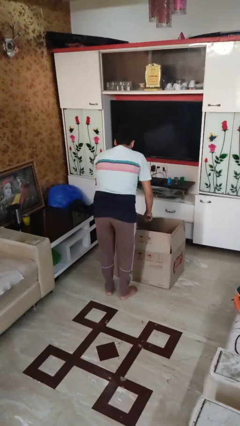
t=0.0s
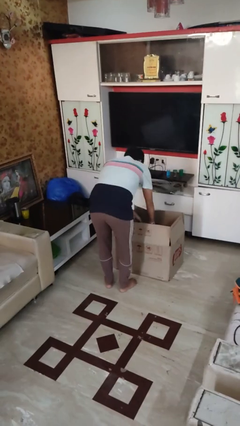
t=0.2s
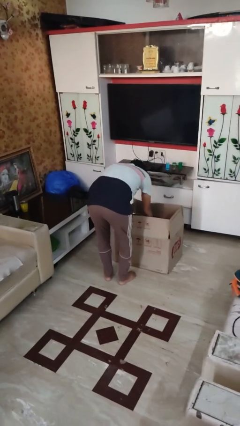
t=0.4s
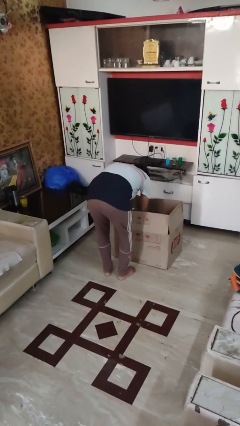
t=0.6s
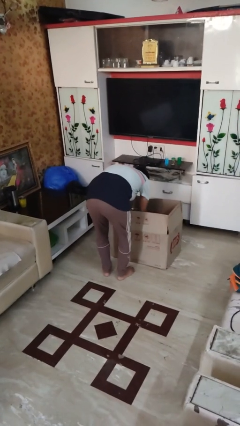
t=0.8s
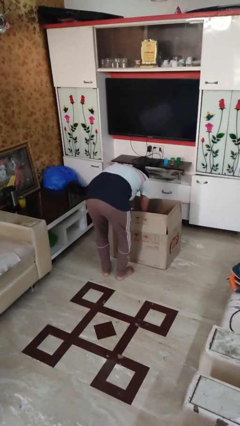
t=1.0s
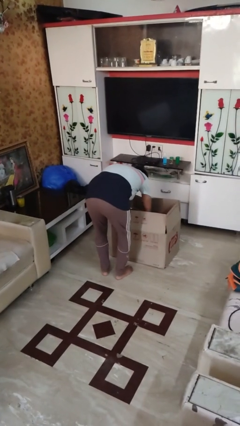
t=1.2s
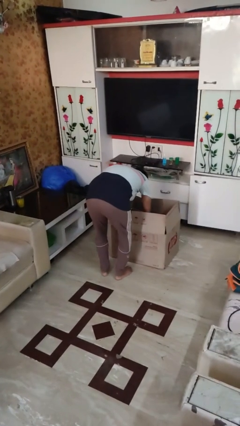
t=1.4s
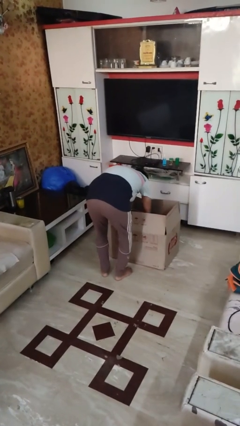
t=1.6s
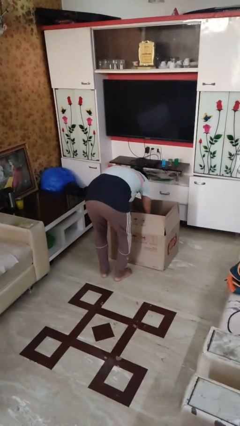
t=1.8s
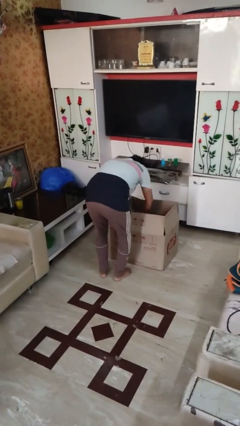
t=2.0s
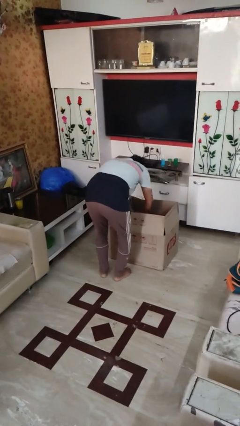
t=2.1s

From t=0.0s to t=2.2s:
person searches in box

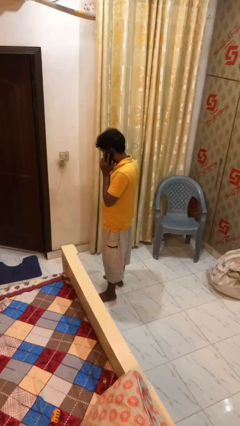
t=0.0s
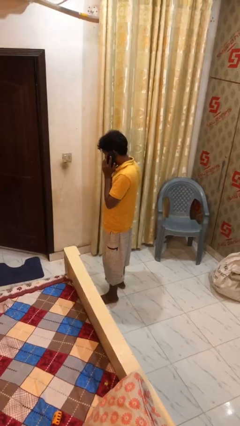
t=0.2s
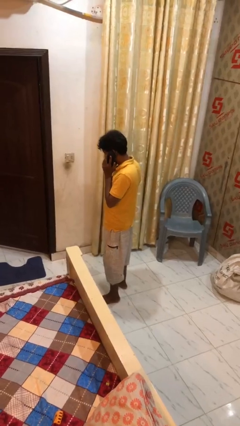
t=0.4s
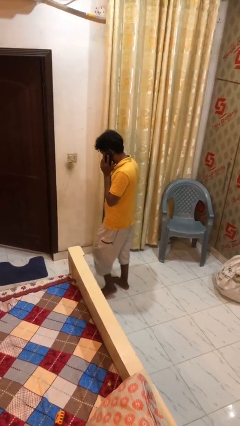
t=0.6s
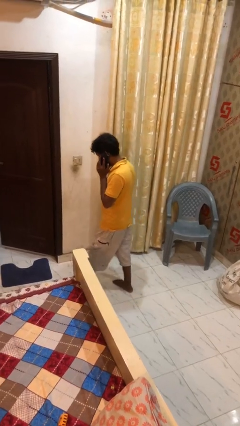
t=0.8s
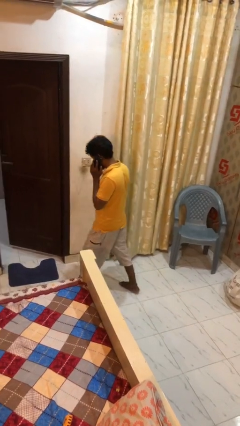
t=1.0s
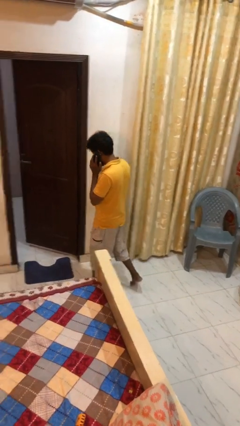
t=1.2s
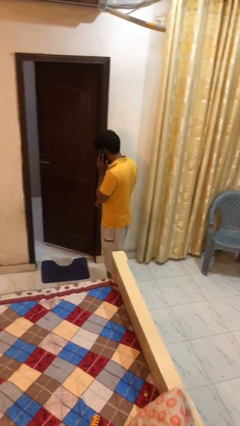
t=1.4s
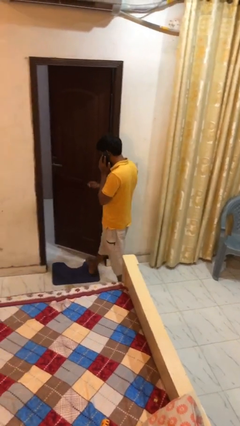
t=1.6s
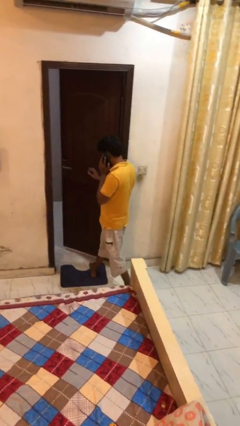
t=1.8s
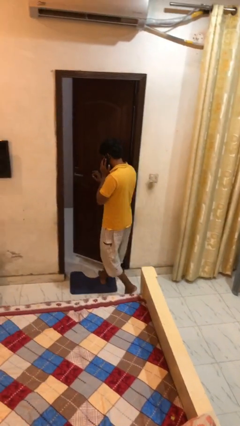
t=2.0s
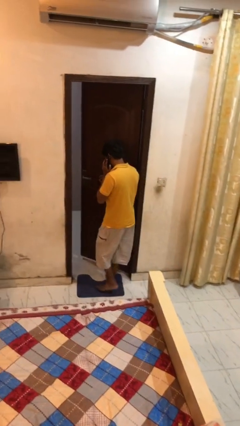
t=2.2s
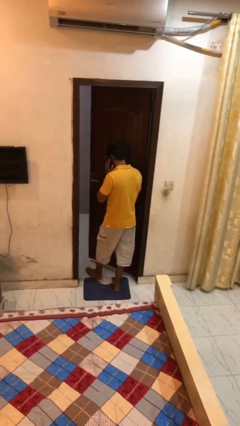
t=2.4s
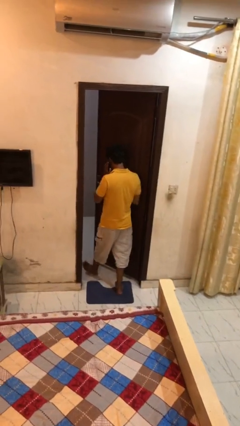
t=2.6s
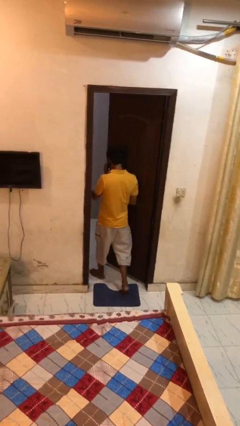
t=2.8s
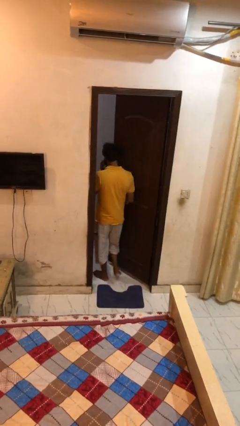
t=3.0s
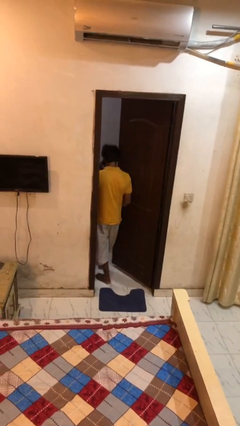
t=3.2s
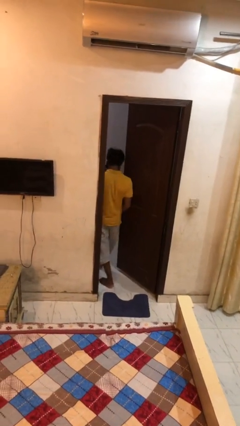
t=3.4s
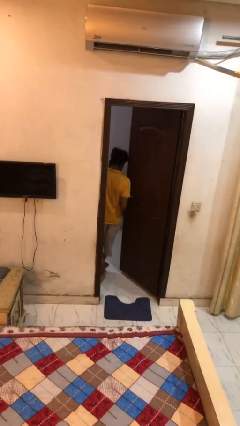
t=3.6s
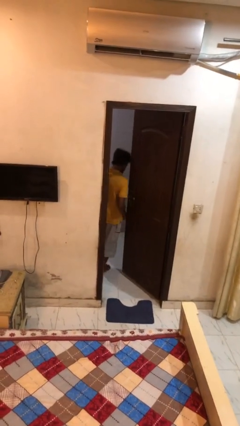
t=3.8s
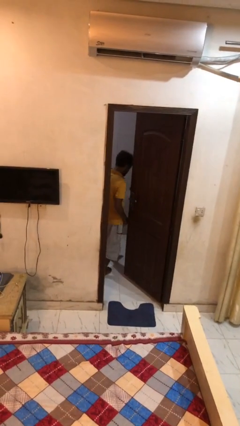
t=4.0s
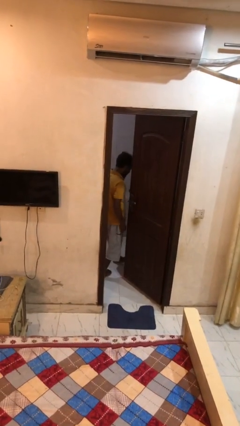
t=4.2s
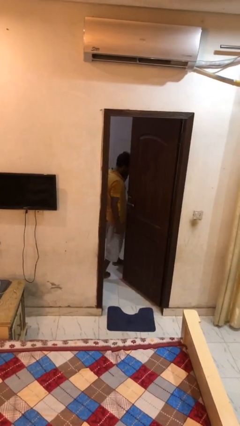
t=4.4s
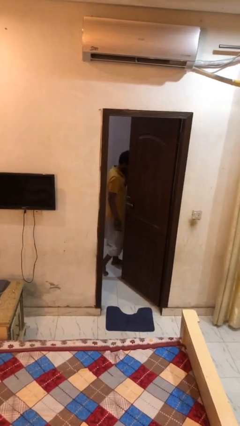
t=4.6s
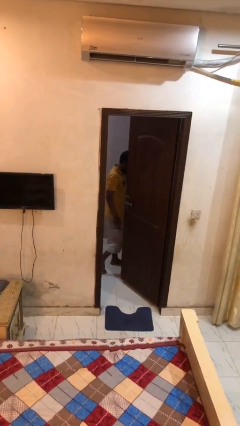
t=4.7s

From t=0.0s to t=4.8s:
person exits scene through structure

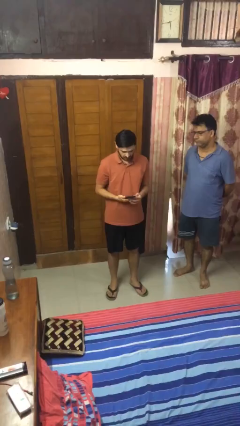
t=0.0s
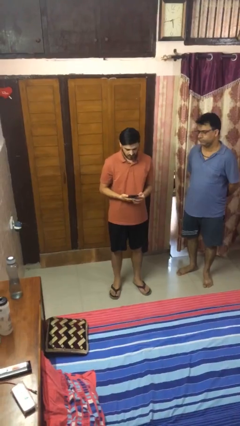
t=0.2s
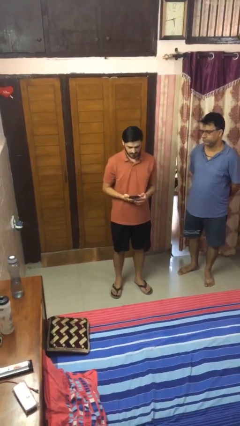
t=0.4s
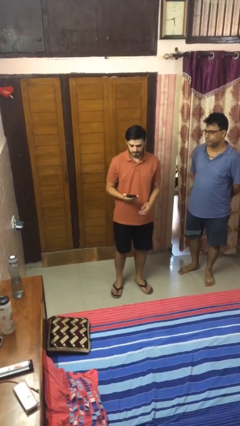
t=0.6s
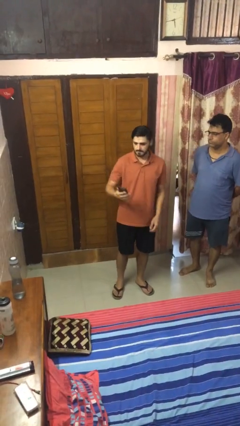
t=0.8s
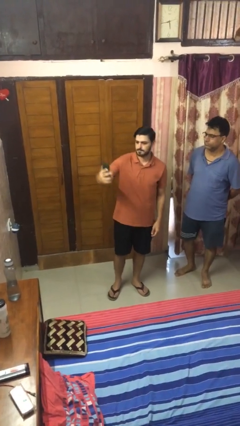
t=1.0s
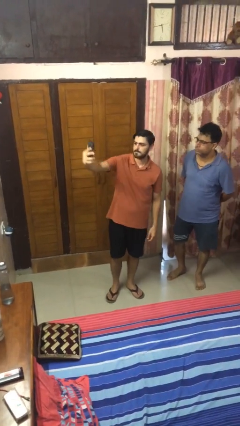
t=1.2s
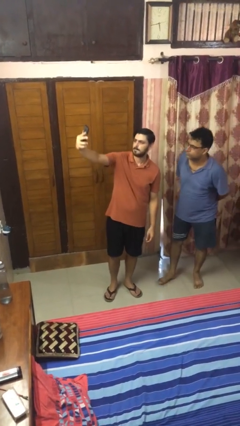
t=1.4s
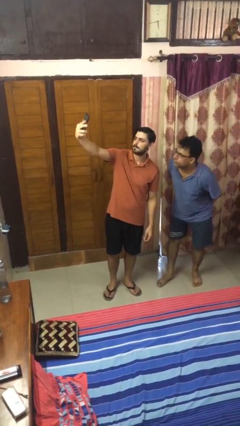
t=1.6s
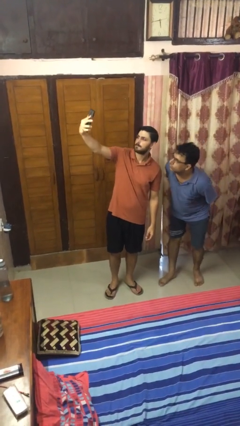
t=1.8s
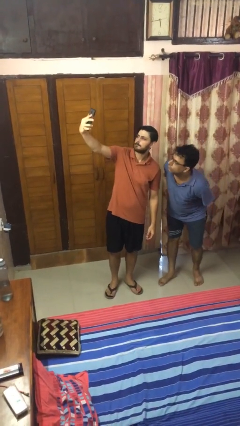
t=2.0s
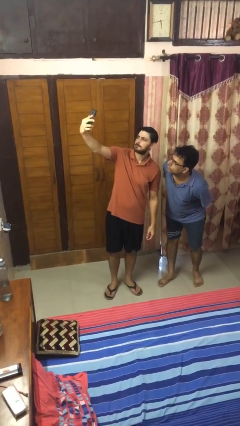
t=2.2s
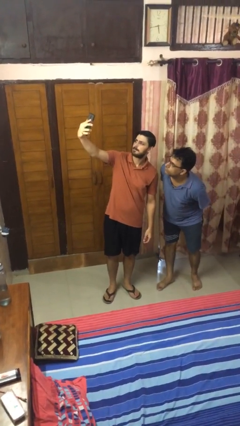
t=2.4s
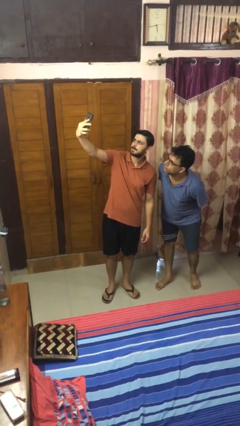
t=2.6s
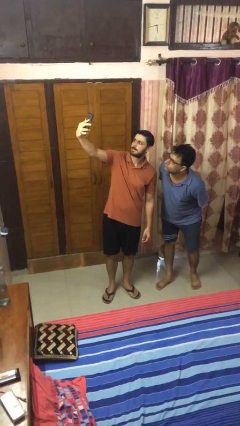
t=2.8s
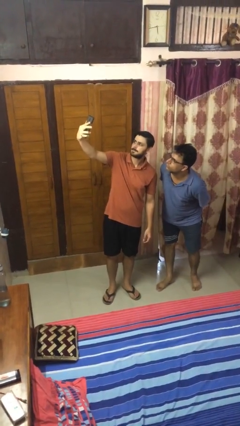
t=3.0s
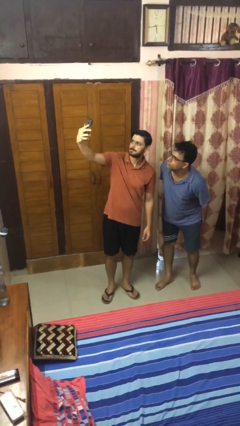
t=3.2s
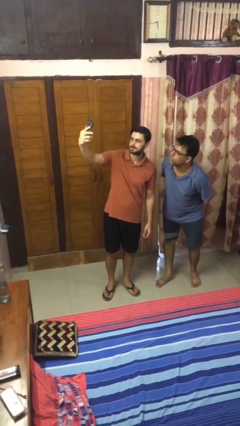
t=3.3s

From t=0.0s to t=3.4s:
person takes selfie with person

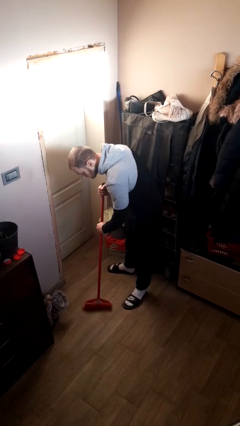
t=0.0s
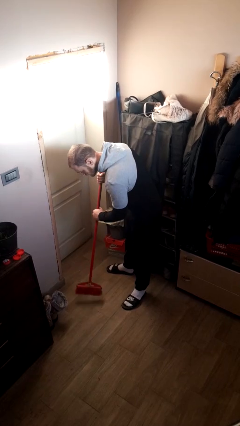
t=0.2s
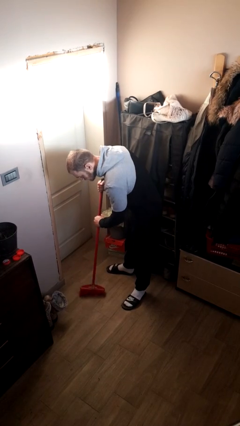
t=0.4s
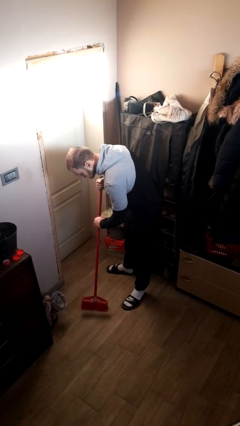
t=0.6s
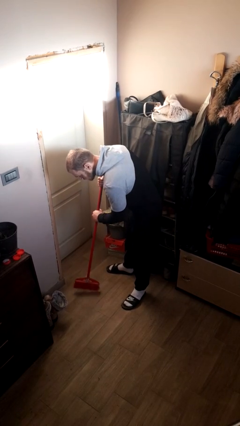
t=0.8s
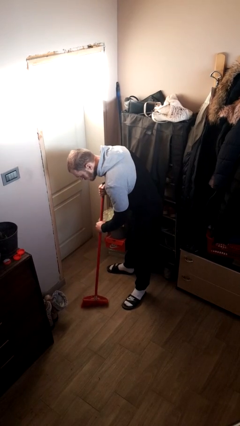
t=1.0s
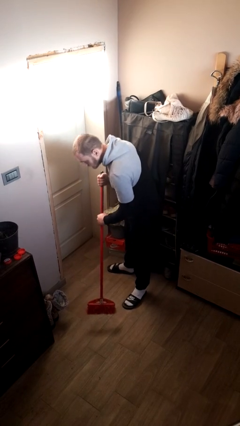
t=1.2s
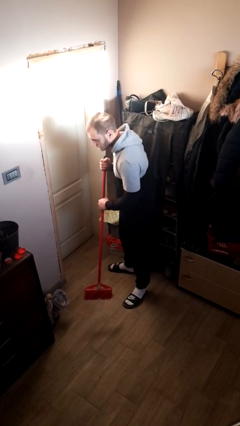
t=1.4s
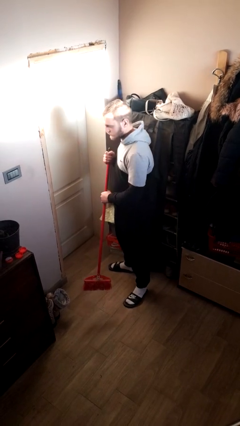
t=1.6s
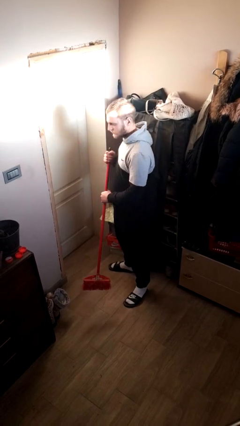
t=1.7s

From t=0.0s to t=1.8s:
person sweeps floor

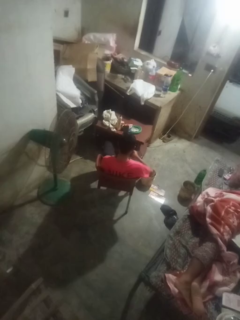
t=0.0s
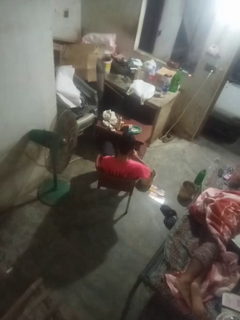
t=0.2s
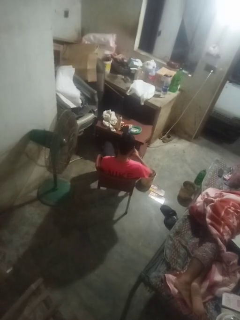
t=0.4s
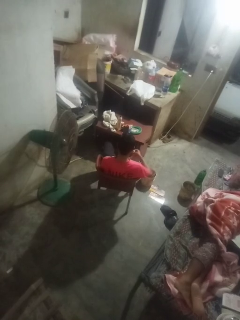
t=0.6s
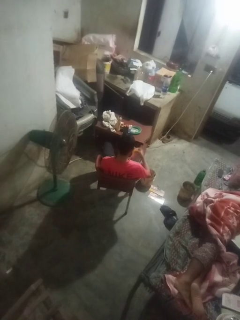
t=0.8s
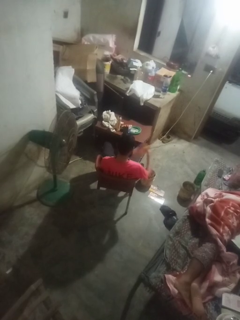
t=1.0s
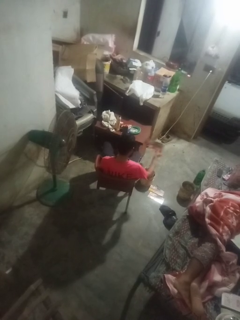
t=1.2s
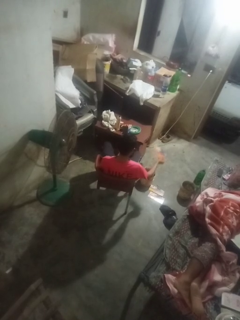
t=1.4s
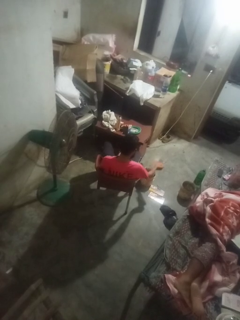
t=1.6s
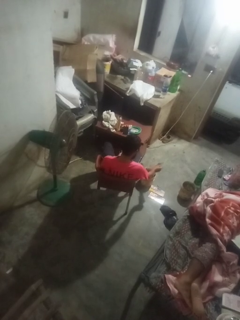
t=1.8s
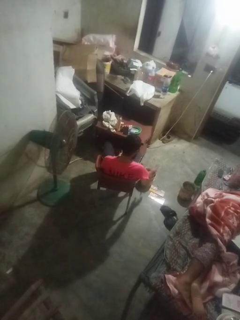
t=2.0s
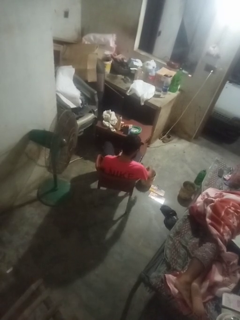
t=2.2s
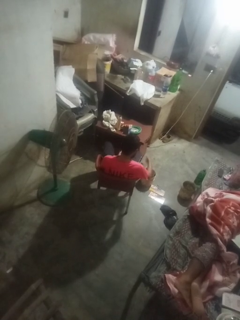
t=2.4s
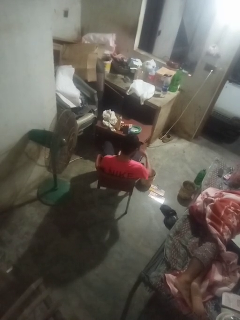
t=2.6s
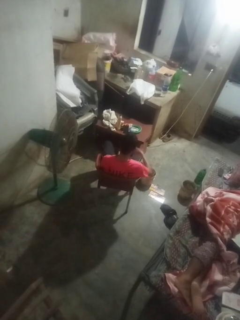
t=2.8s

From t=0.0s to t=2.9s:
person discards trash

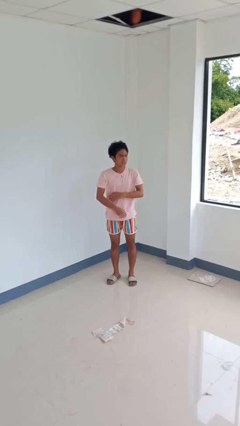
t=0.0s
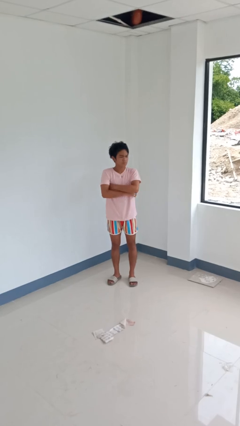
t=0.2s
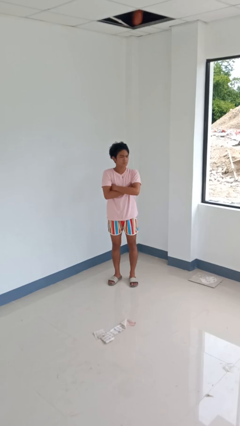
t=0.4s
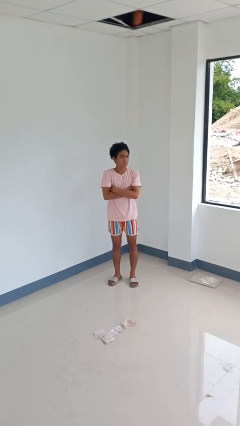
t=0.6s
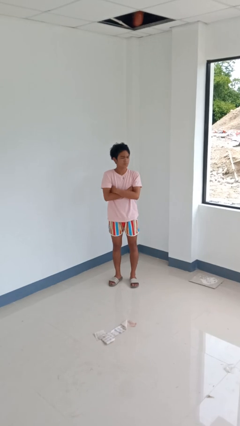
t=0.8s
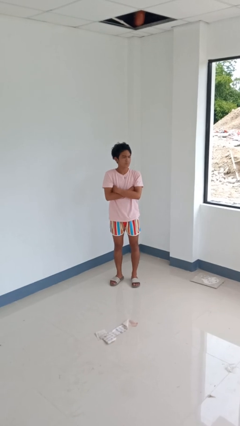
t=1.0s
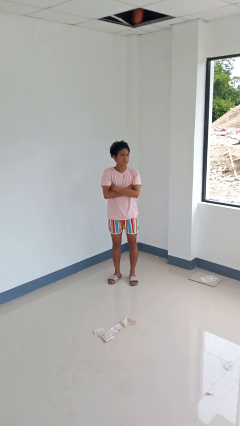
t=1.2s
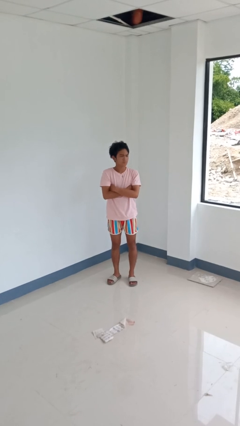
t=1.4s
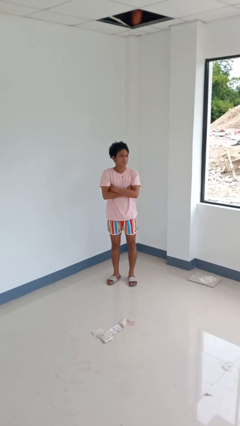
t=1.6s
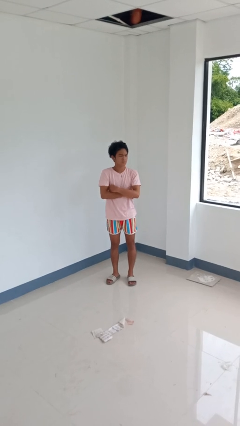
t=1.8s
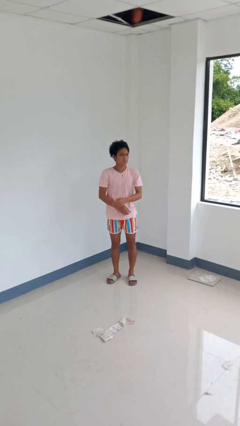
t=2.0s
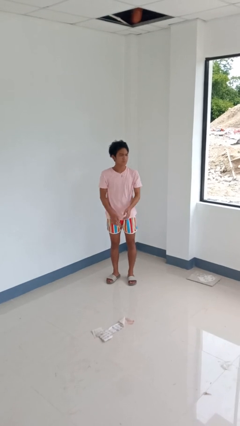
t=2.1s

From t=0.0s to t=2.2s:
person crosses arms

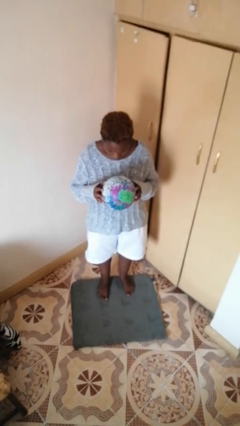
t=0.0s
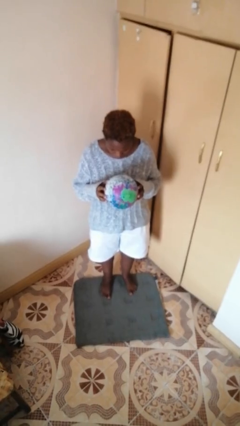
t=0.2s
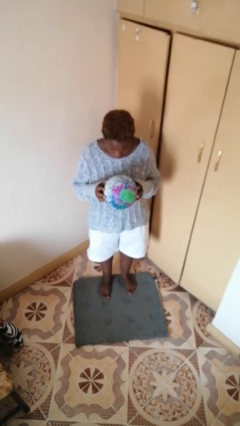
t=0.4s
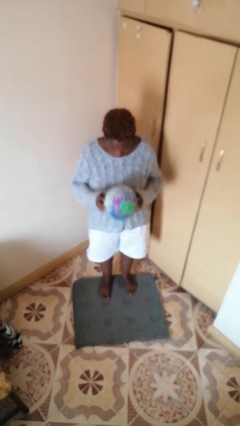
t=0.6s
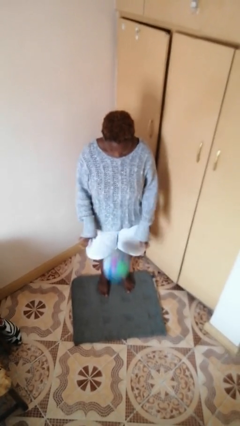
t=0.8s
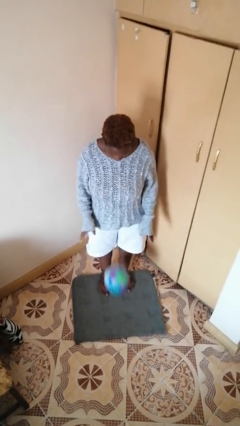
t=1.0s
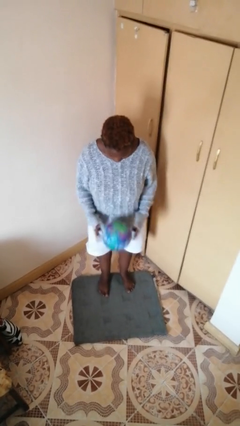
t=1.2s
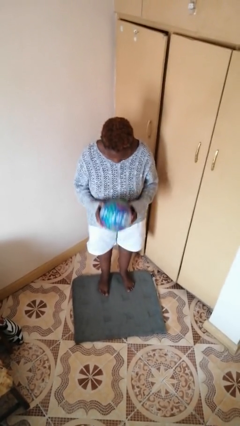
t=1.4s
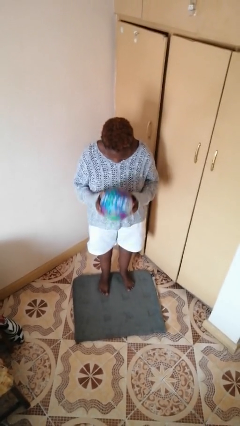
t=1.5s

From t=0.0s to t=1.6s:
person bounces ball on floor
